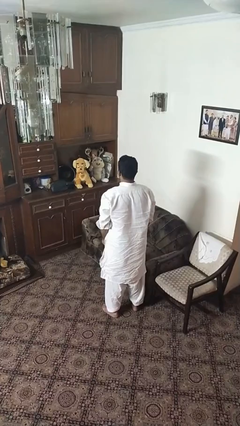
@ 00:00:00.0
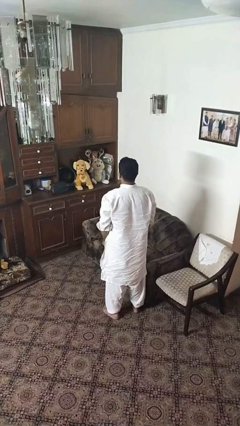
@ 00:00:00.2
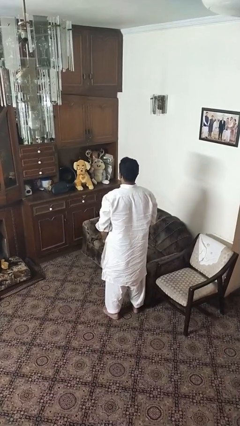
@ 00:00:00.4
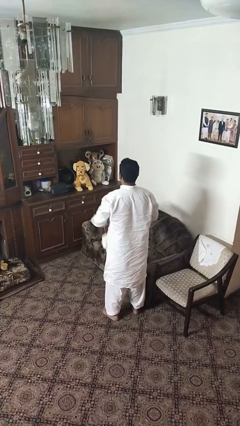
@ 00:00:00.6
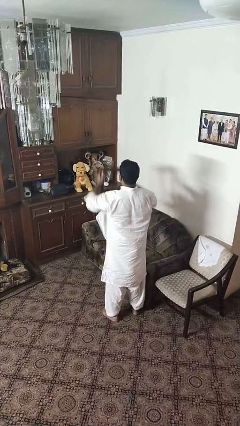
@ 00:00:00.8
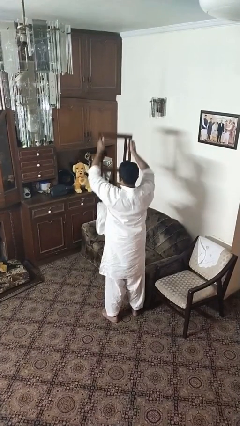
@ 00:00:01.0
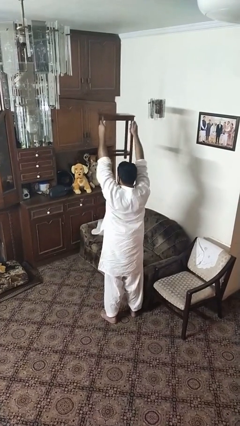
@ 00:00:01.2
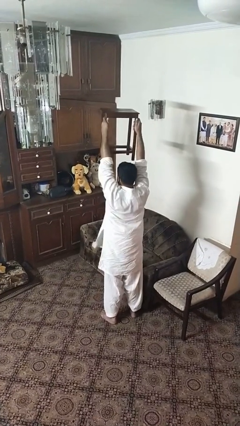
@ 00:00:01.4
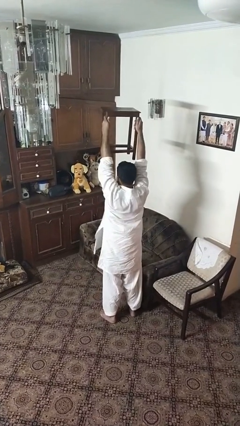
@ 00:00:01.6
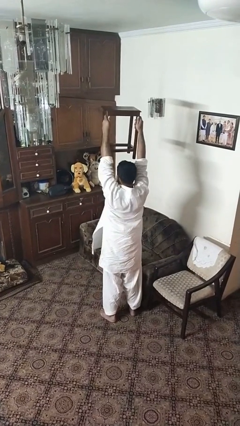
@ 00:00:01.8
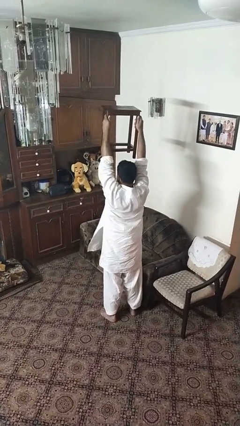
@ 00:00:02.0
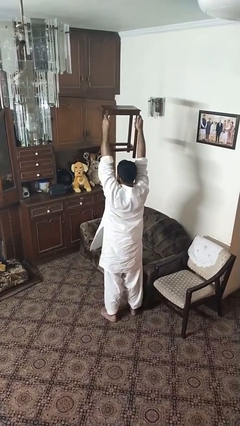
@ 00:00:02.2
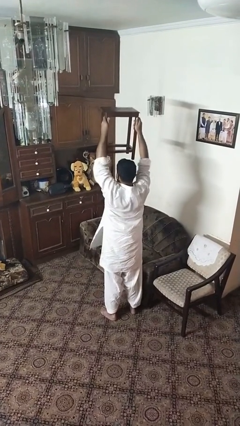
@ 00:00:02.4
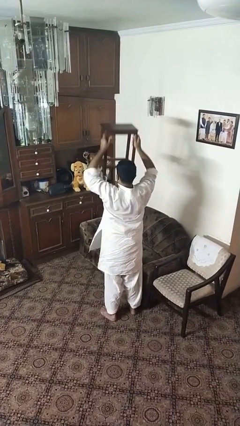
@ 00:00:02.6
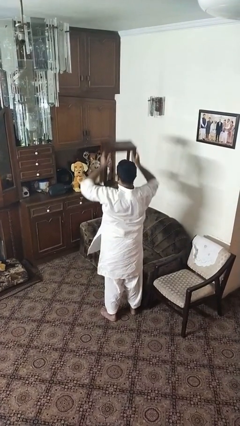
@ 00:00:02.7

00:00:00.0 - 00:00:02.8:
person holds object above head

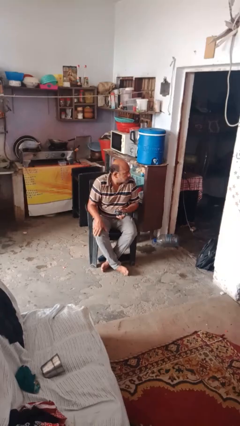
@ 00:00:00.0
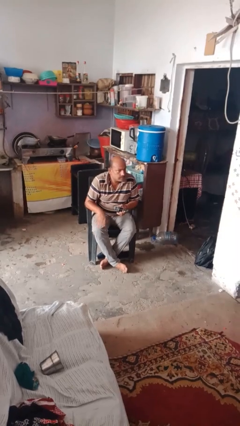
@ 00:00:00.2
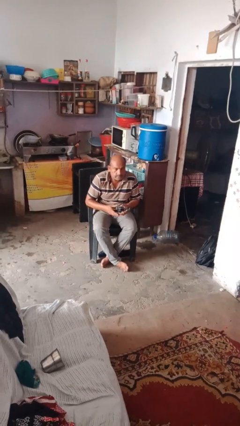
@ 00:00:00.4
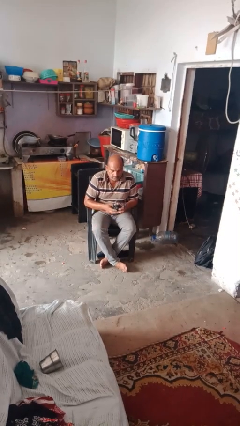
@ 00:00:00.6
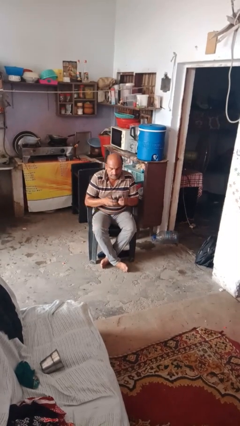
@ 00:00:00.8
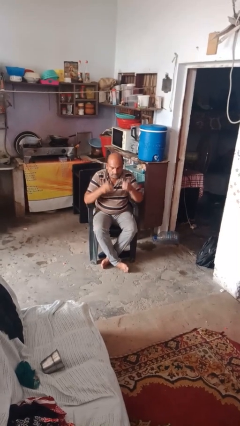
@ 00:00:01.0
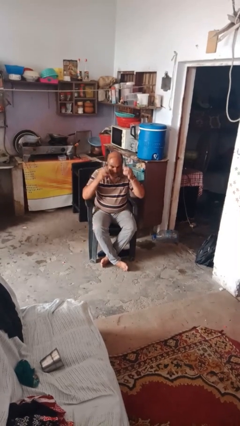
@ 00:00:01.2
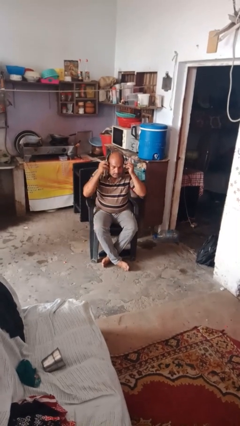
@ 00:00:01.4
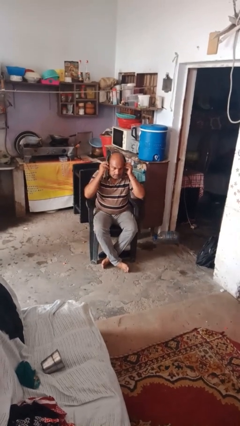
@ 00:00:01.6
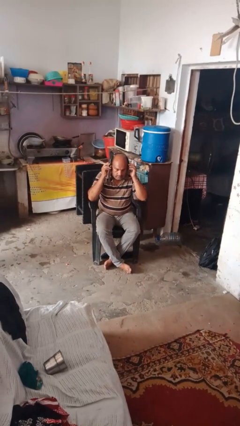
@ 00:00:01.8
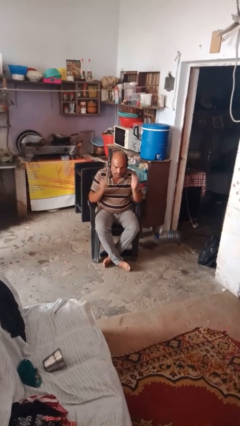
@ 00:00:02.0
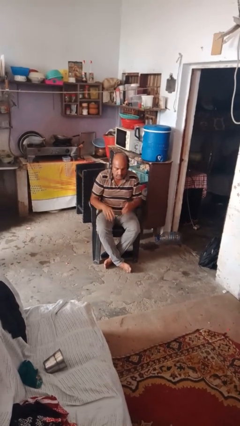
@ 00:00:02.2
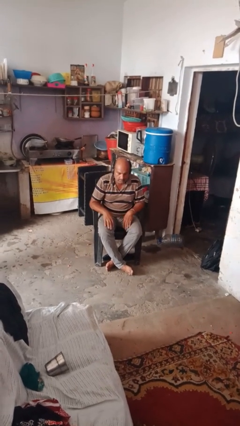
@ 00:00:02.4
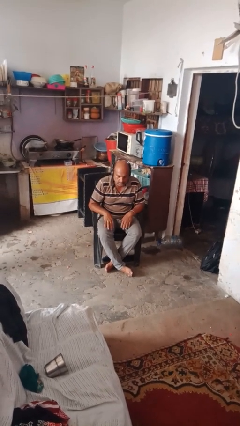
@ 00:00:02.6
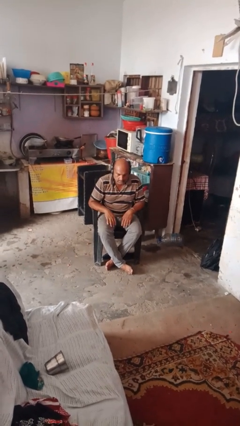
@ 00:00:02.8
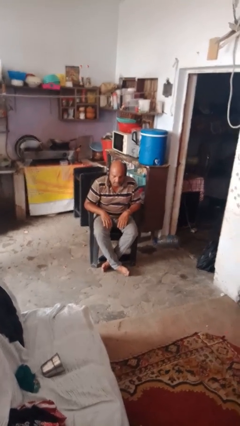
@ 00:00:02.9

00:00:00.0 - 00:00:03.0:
person puts on headphones

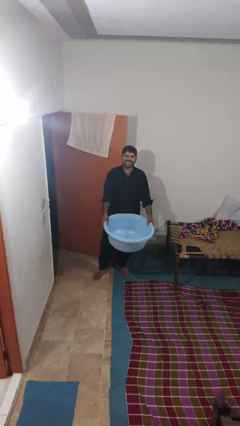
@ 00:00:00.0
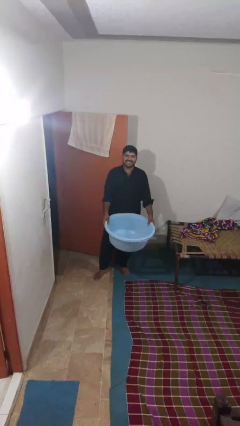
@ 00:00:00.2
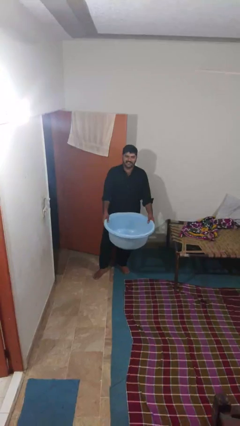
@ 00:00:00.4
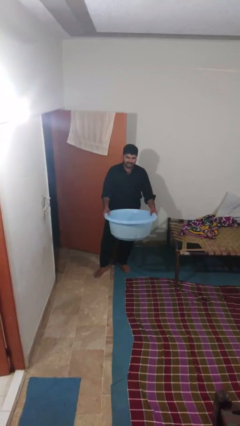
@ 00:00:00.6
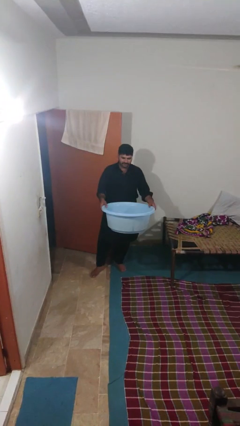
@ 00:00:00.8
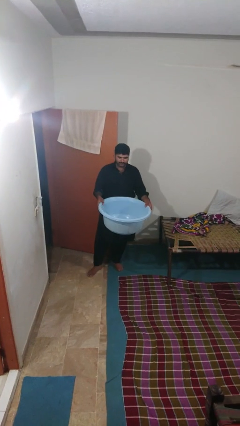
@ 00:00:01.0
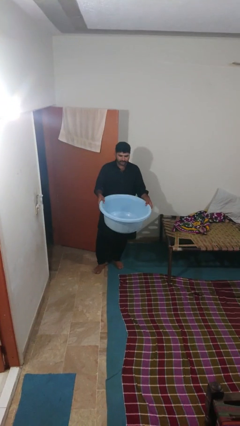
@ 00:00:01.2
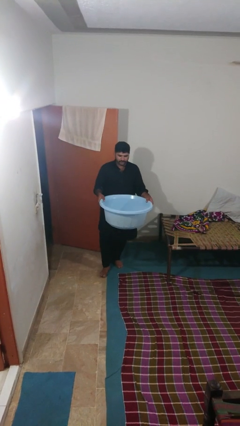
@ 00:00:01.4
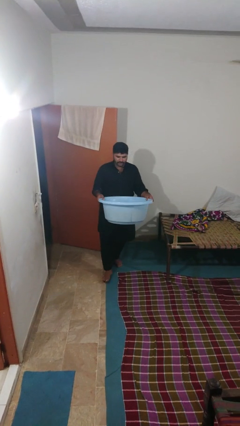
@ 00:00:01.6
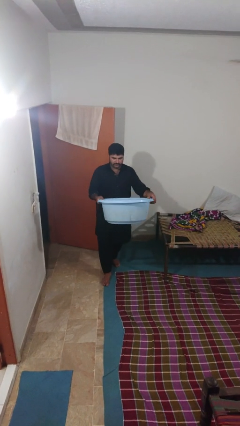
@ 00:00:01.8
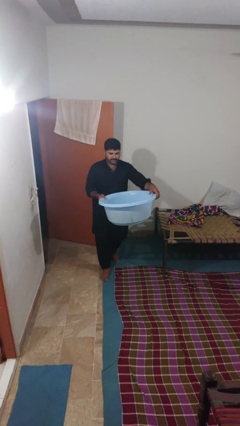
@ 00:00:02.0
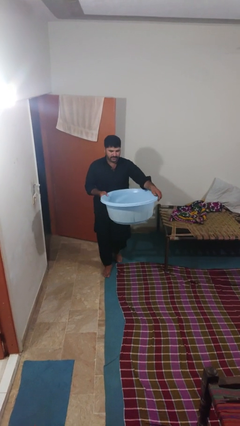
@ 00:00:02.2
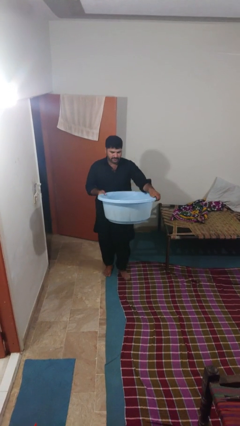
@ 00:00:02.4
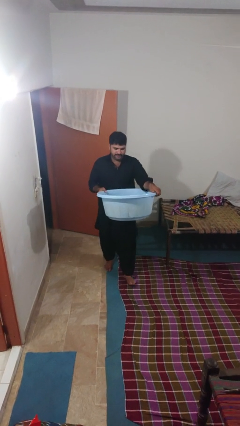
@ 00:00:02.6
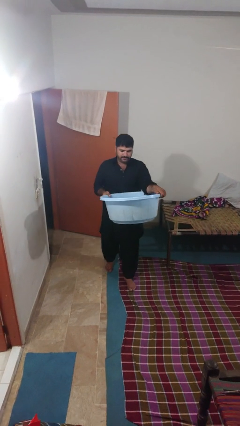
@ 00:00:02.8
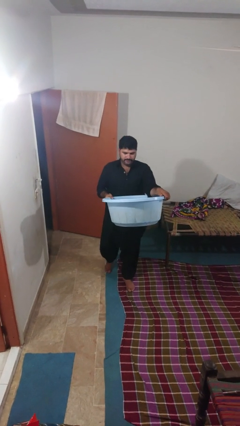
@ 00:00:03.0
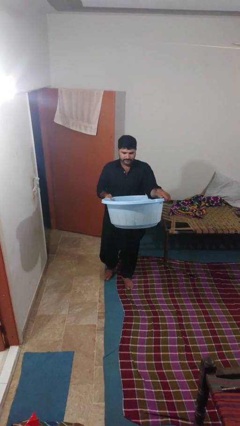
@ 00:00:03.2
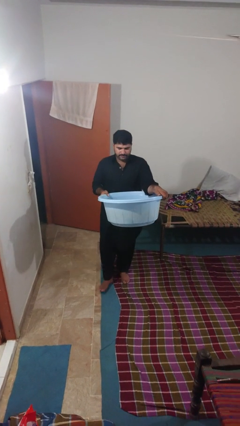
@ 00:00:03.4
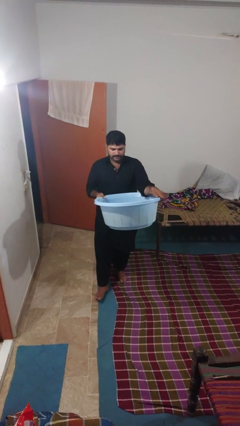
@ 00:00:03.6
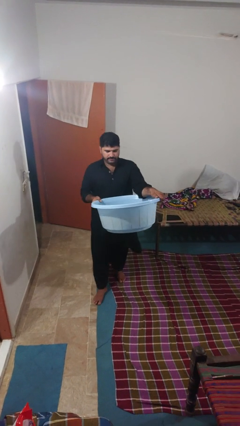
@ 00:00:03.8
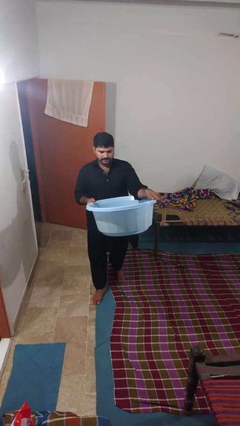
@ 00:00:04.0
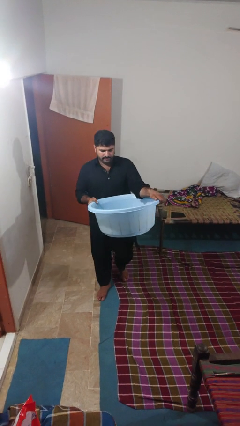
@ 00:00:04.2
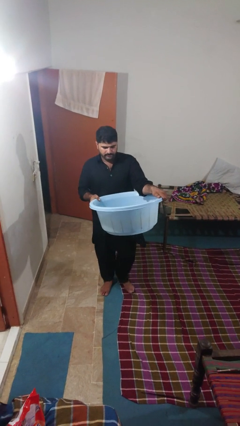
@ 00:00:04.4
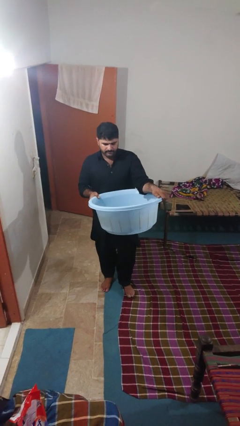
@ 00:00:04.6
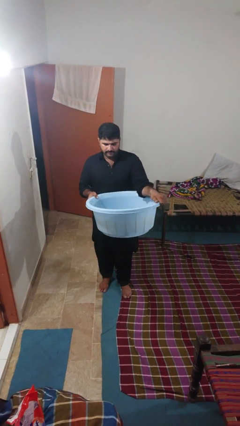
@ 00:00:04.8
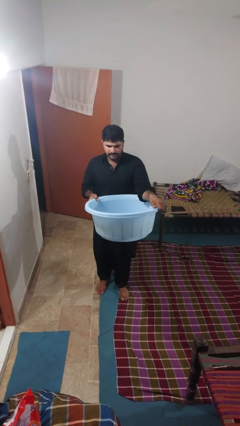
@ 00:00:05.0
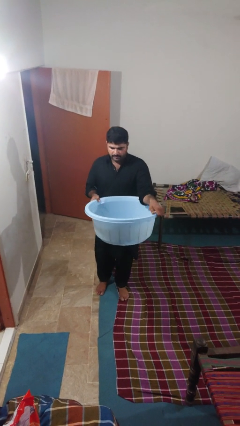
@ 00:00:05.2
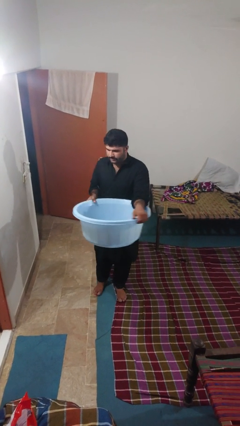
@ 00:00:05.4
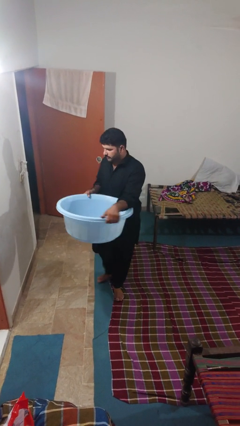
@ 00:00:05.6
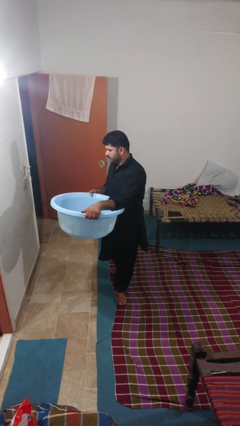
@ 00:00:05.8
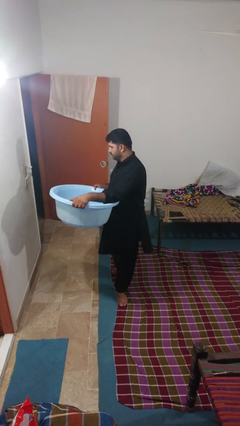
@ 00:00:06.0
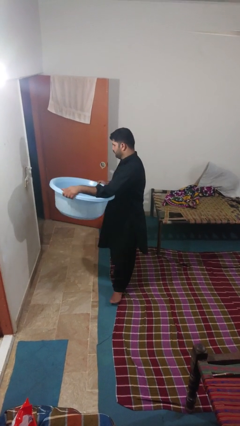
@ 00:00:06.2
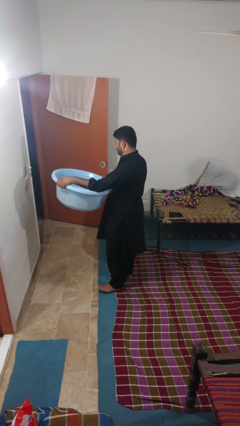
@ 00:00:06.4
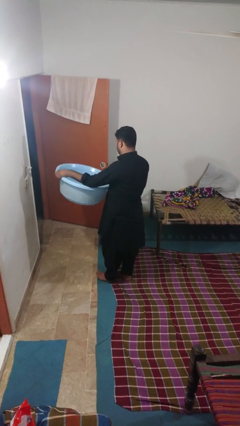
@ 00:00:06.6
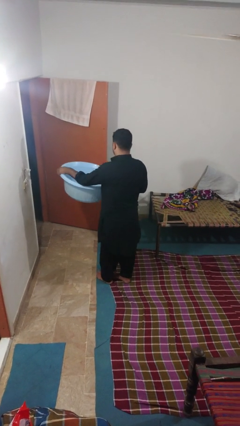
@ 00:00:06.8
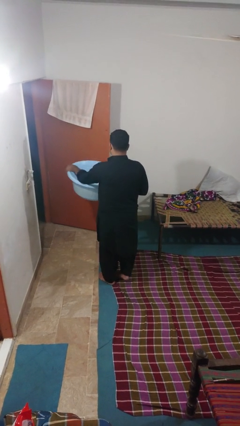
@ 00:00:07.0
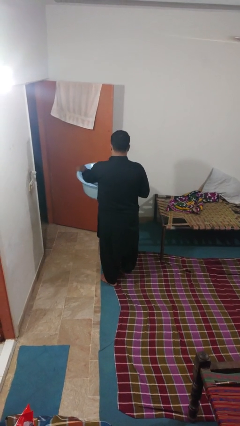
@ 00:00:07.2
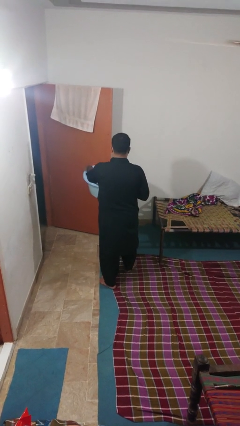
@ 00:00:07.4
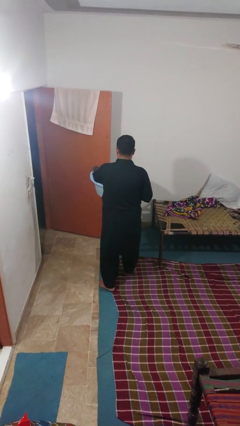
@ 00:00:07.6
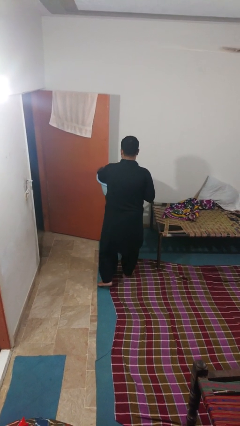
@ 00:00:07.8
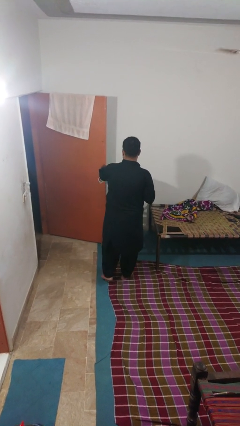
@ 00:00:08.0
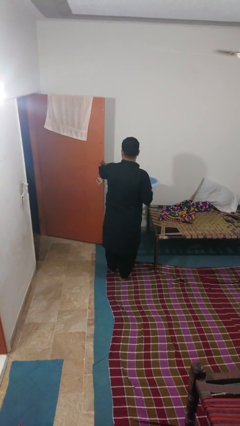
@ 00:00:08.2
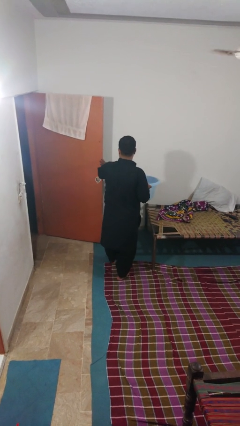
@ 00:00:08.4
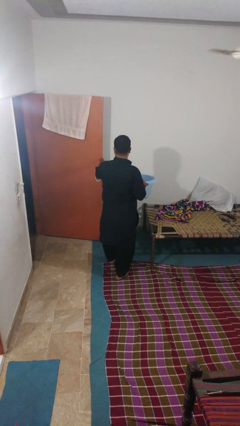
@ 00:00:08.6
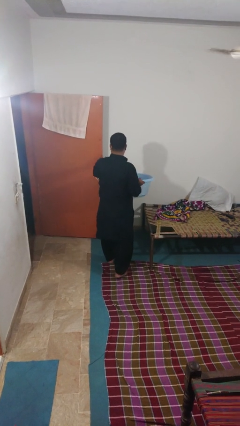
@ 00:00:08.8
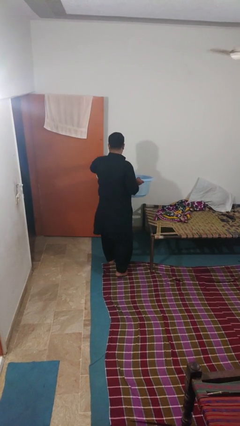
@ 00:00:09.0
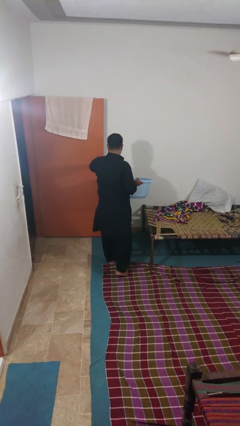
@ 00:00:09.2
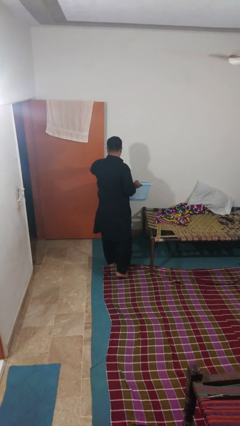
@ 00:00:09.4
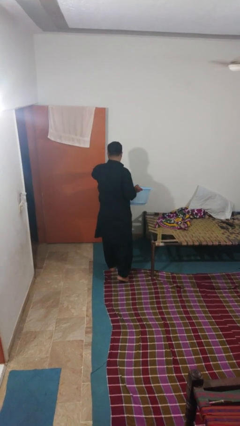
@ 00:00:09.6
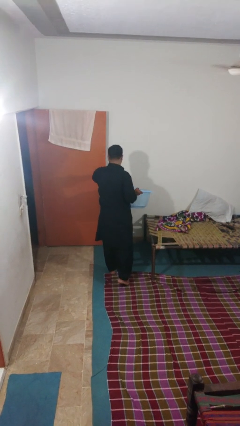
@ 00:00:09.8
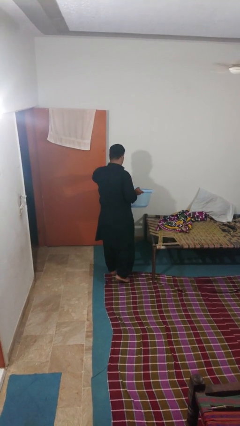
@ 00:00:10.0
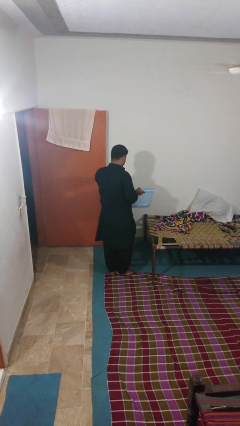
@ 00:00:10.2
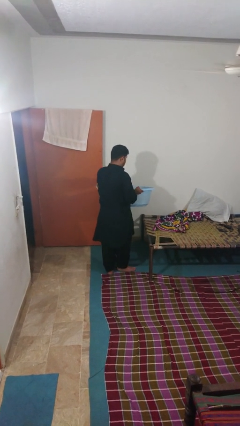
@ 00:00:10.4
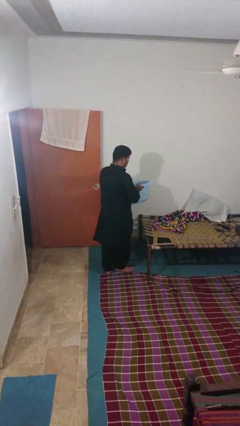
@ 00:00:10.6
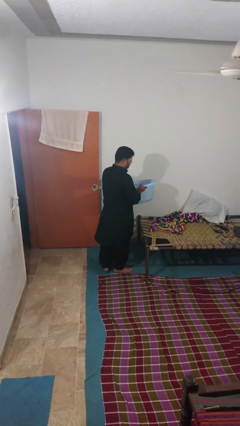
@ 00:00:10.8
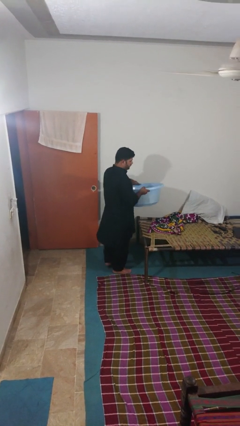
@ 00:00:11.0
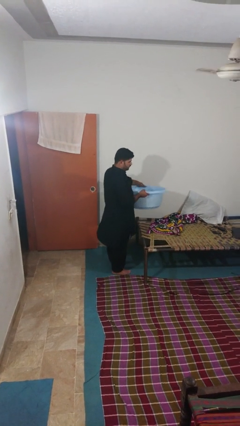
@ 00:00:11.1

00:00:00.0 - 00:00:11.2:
person carries furniture

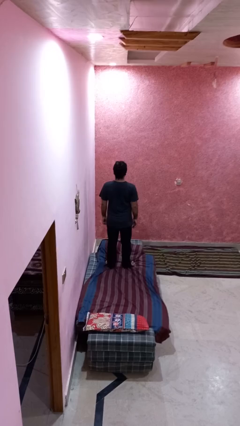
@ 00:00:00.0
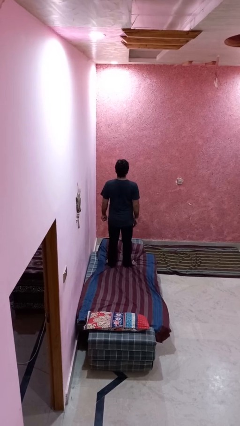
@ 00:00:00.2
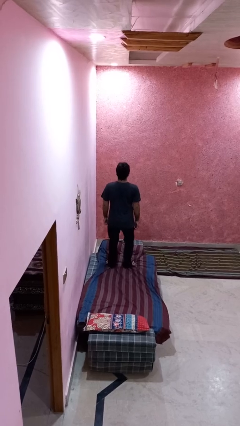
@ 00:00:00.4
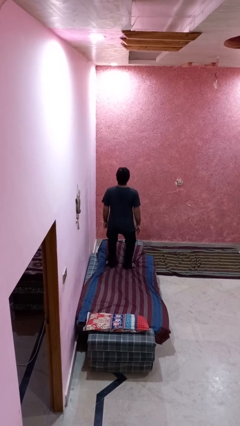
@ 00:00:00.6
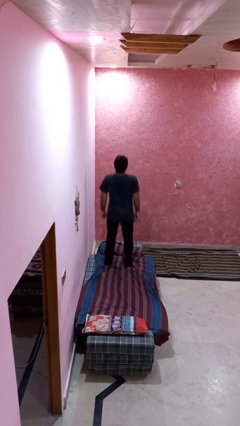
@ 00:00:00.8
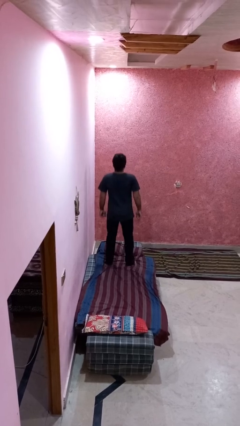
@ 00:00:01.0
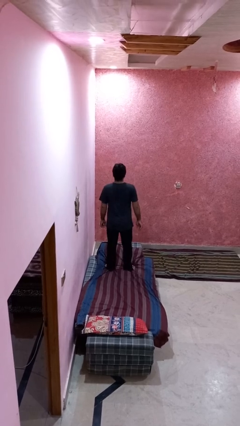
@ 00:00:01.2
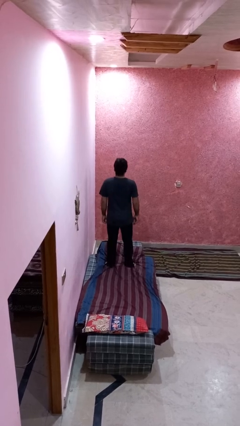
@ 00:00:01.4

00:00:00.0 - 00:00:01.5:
person jumps on bed
